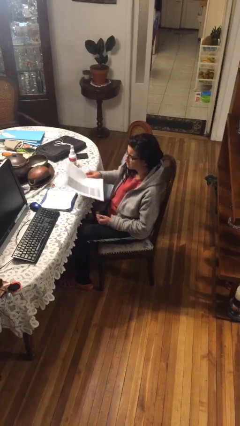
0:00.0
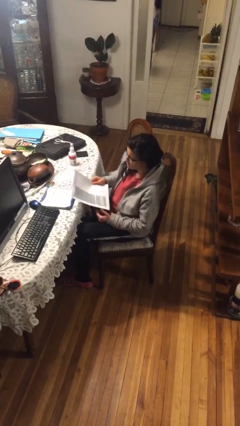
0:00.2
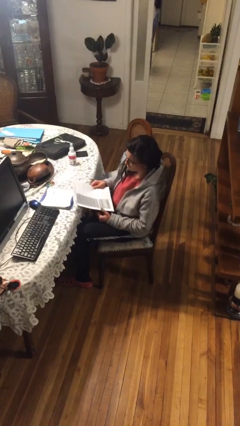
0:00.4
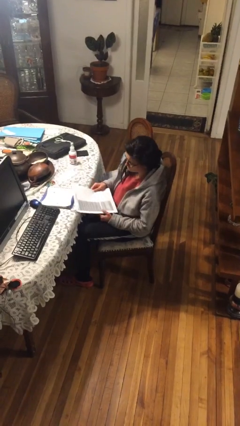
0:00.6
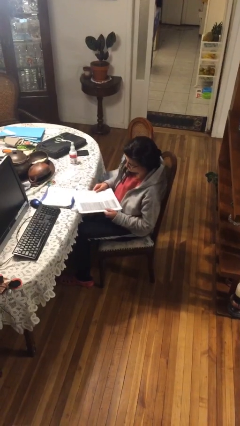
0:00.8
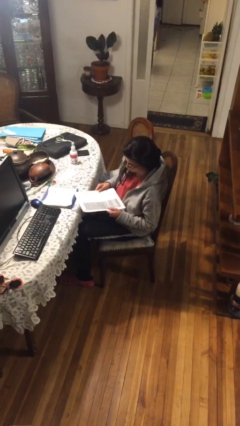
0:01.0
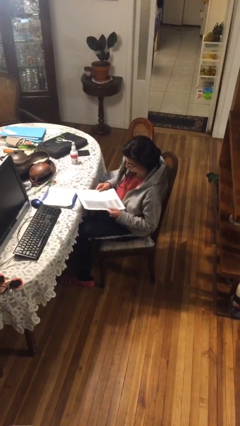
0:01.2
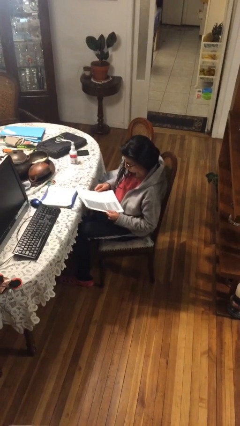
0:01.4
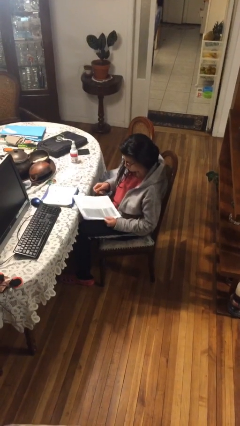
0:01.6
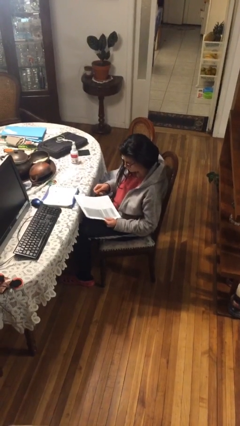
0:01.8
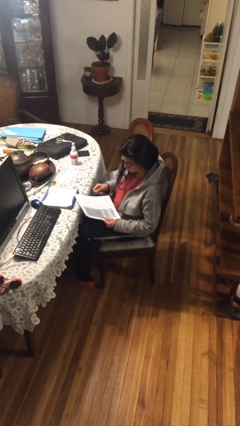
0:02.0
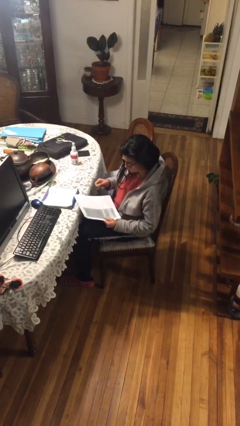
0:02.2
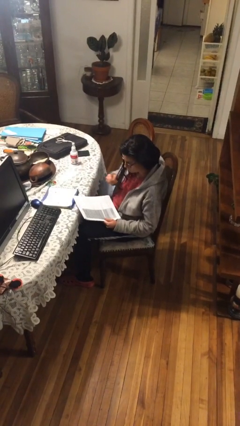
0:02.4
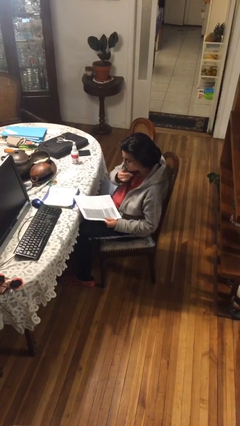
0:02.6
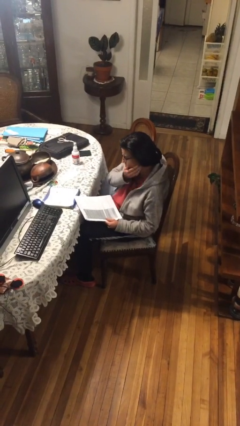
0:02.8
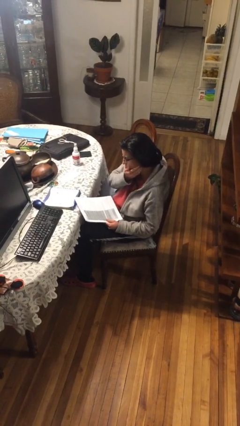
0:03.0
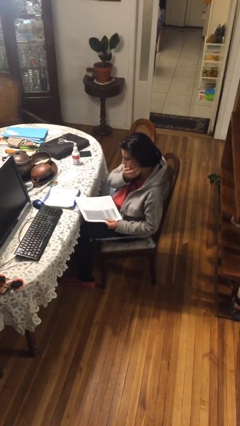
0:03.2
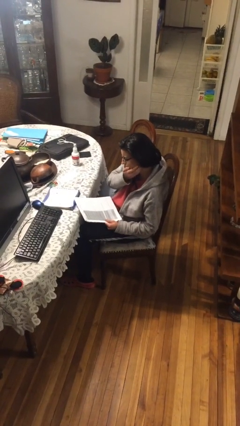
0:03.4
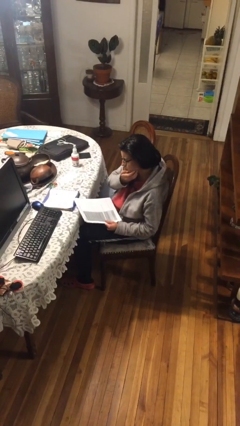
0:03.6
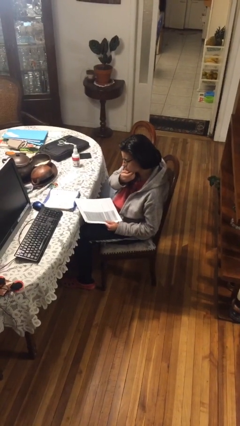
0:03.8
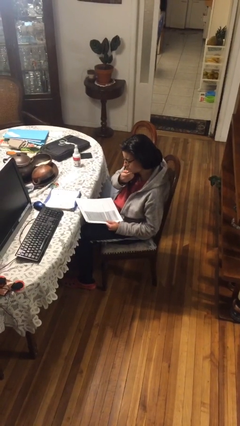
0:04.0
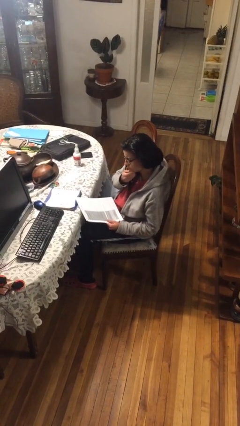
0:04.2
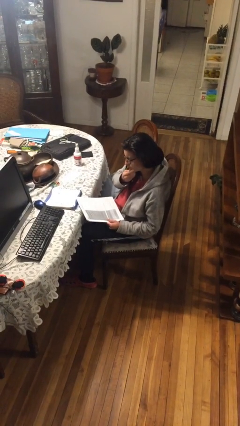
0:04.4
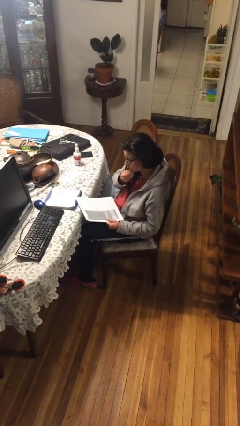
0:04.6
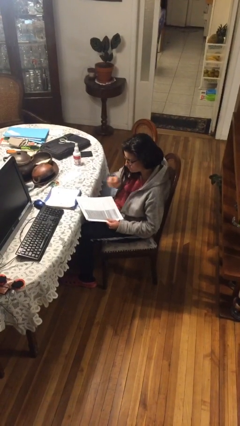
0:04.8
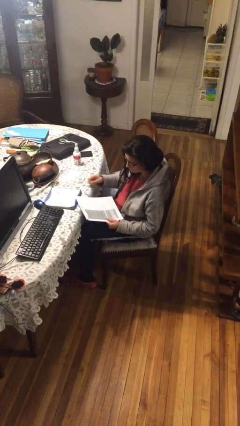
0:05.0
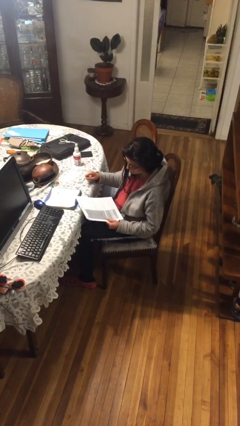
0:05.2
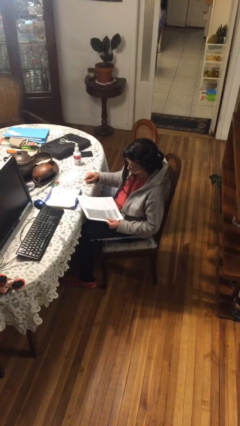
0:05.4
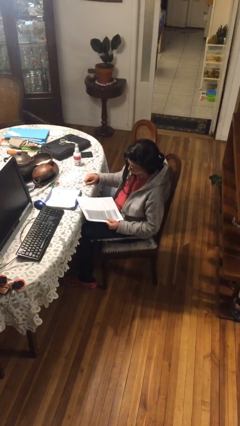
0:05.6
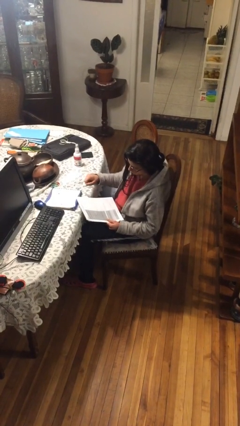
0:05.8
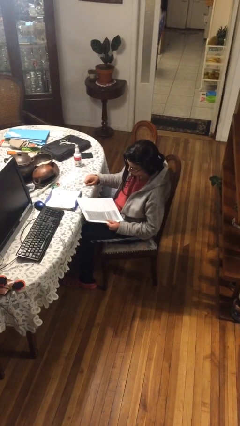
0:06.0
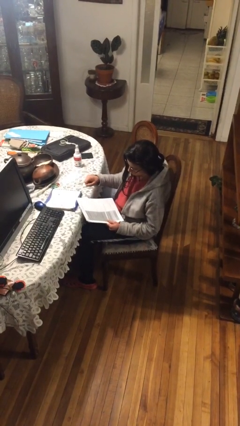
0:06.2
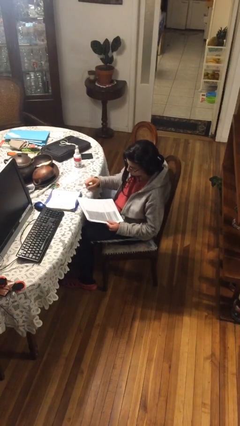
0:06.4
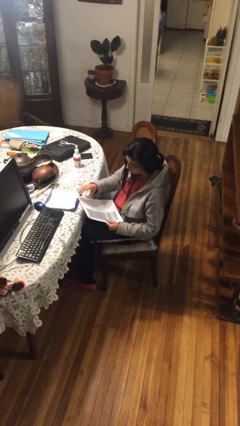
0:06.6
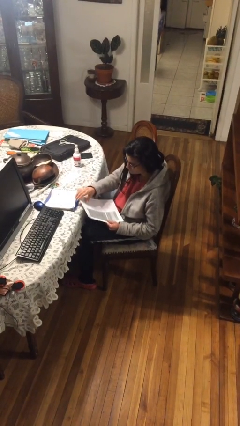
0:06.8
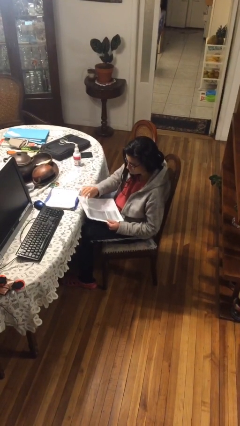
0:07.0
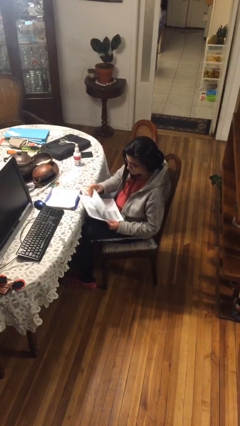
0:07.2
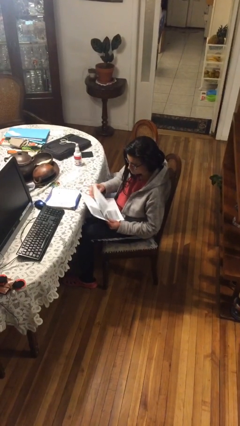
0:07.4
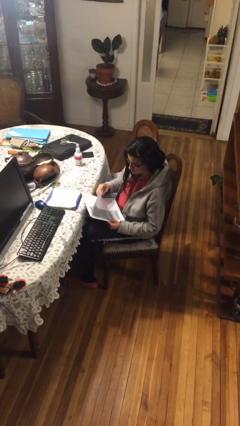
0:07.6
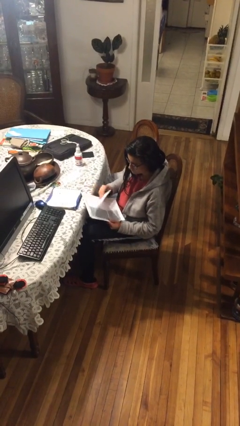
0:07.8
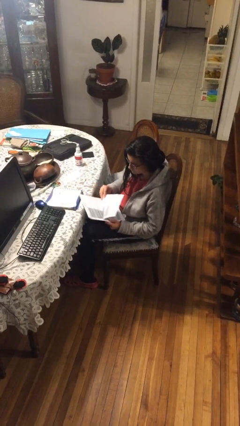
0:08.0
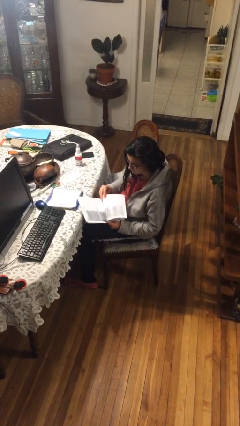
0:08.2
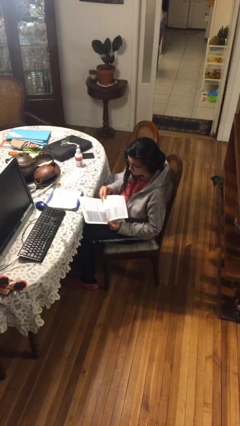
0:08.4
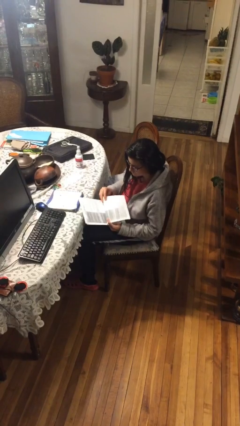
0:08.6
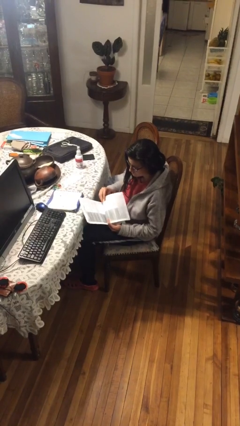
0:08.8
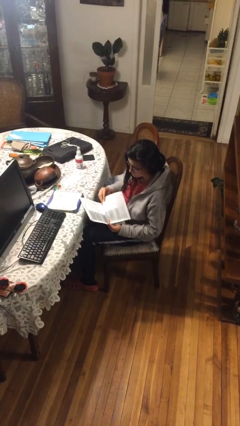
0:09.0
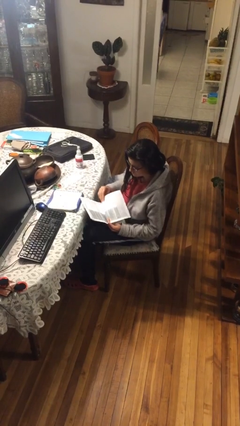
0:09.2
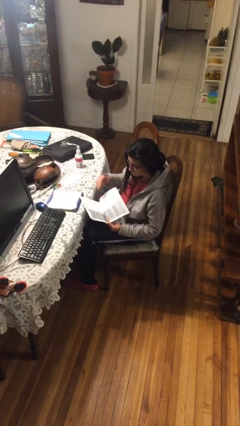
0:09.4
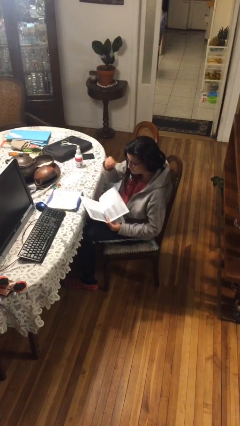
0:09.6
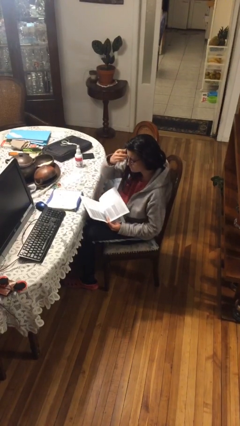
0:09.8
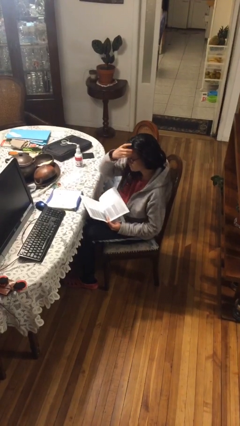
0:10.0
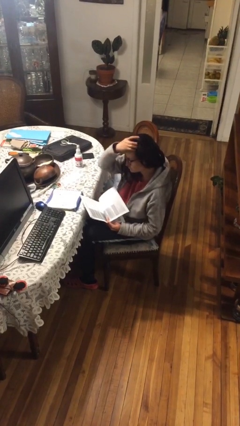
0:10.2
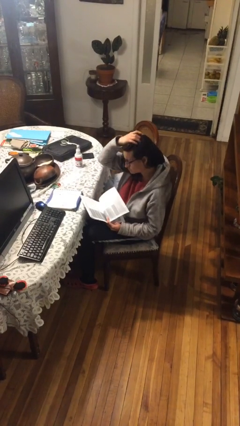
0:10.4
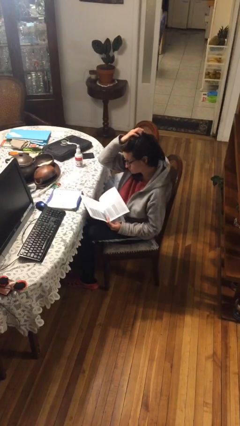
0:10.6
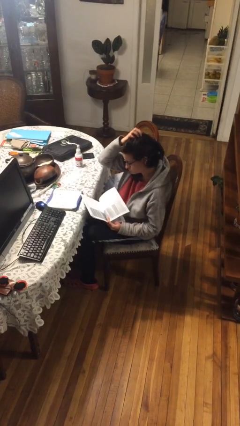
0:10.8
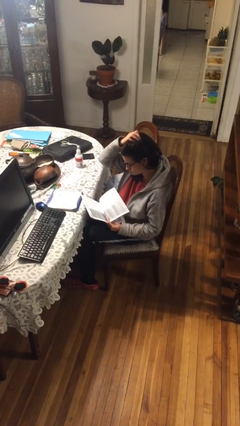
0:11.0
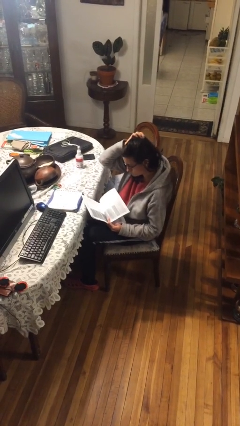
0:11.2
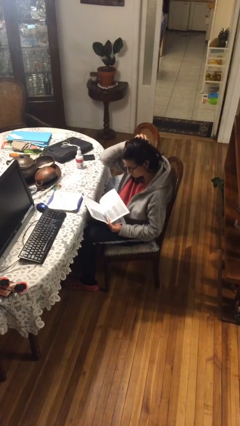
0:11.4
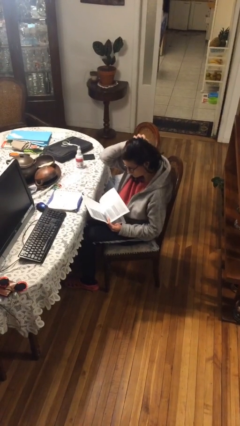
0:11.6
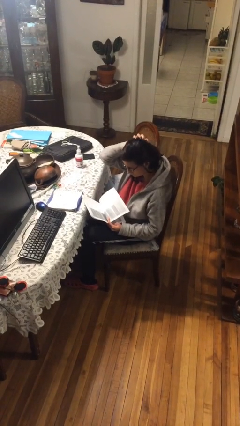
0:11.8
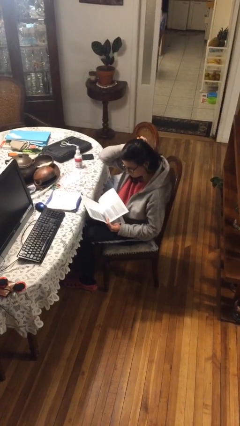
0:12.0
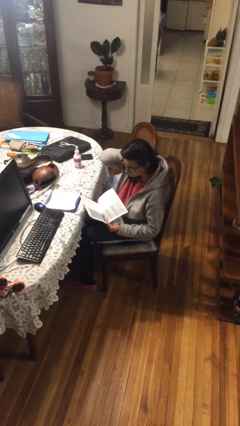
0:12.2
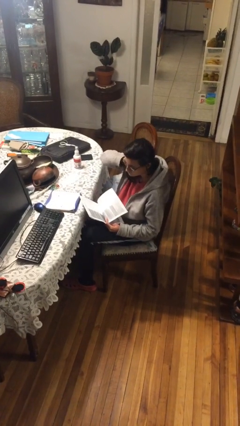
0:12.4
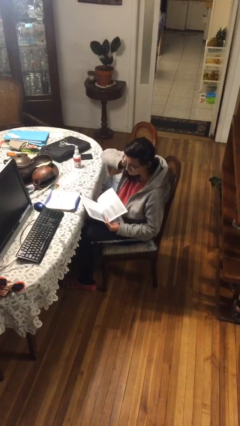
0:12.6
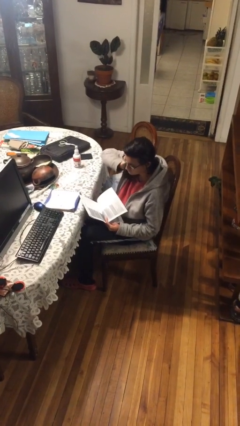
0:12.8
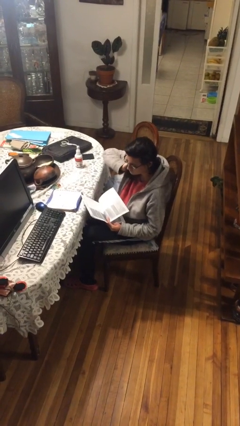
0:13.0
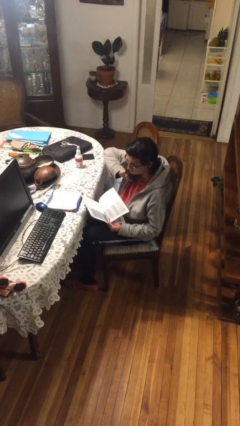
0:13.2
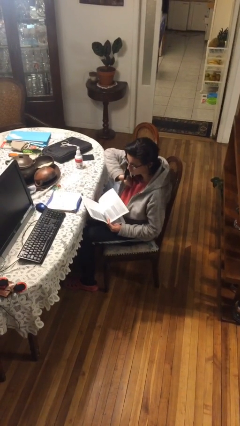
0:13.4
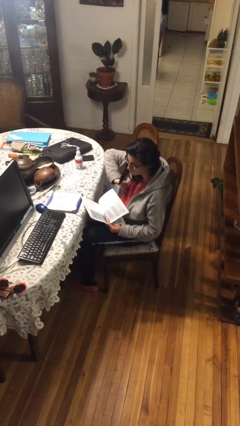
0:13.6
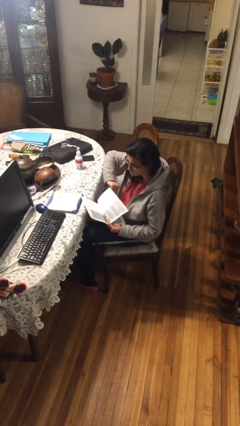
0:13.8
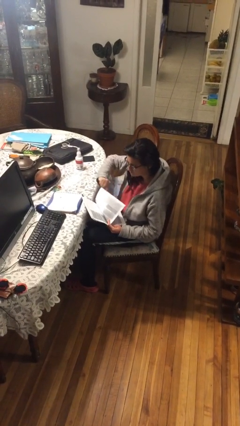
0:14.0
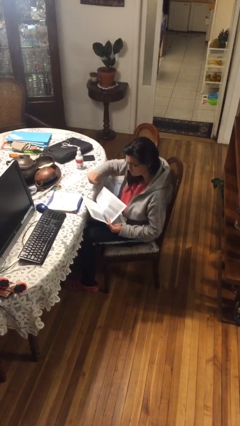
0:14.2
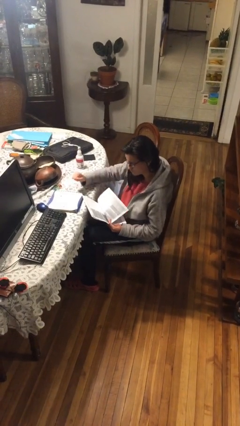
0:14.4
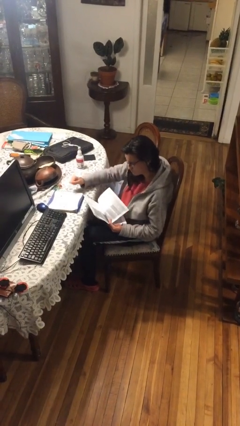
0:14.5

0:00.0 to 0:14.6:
person reads document

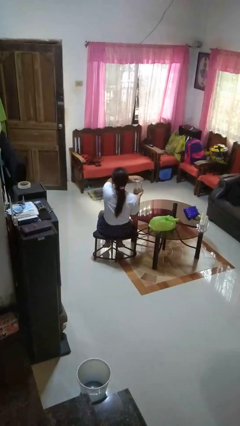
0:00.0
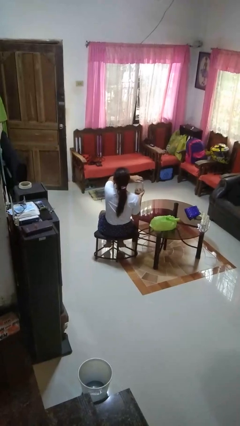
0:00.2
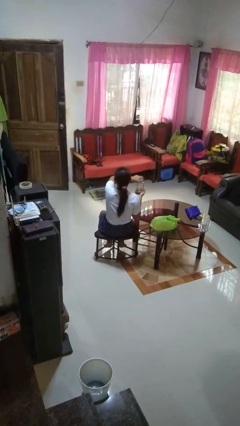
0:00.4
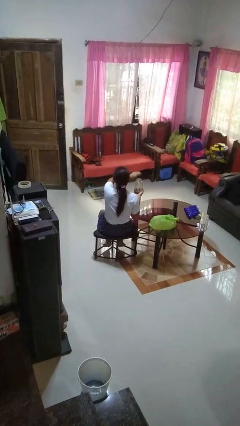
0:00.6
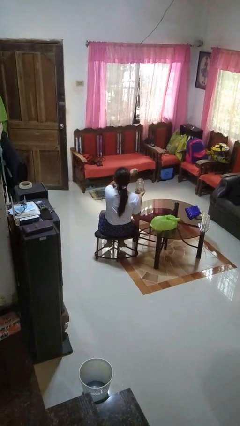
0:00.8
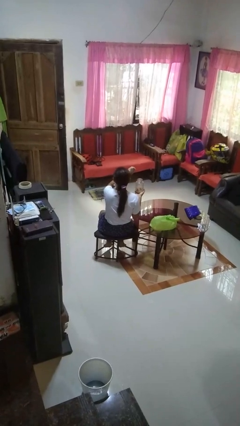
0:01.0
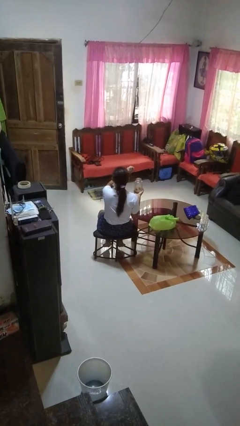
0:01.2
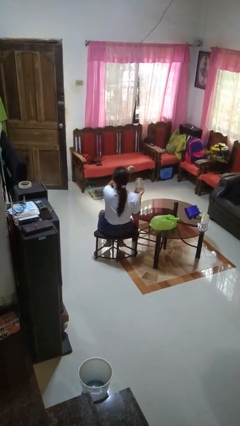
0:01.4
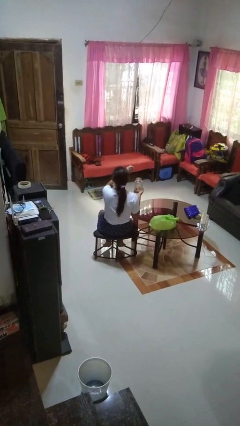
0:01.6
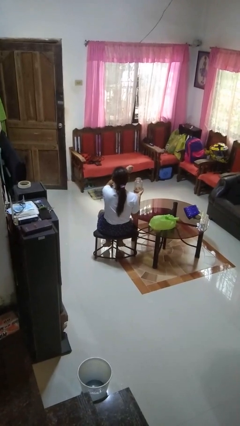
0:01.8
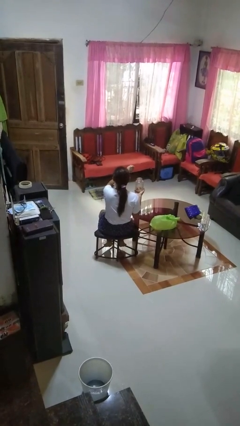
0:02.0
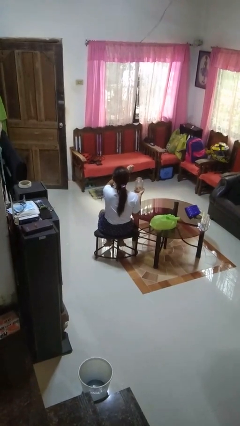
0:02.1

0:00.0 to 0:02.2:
person opens jar

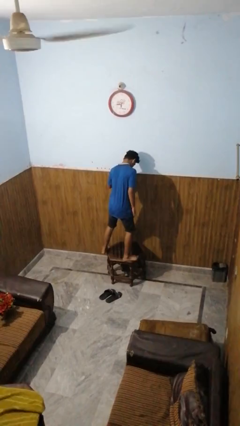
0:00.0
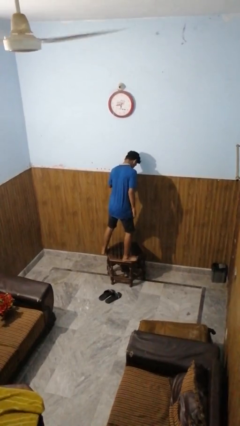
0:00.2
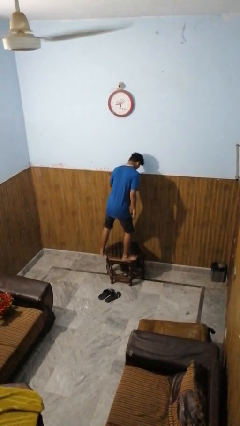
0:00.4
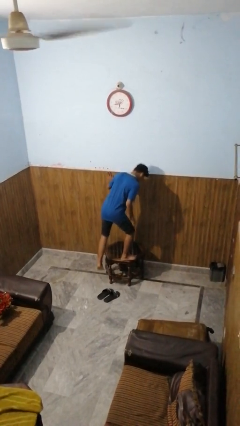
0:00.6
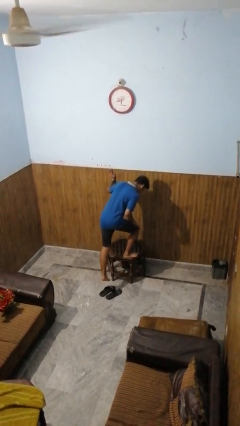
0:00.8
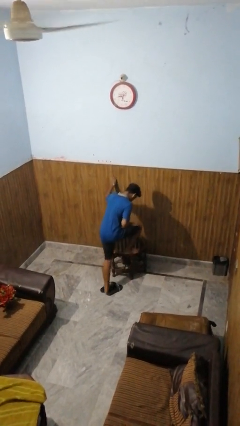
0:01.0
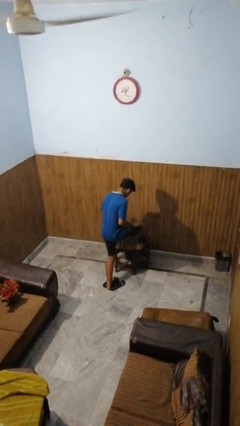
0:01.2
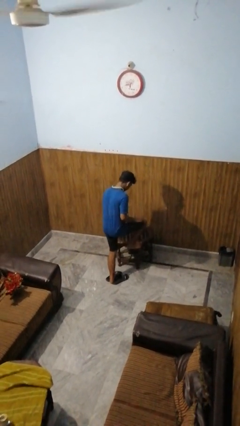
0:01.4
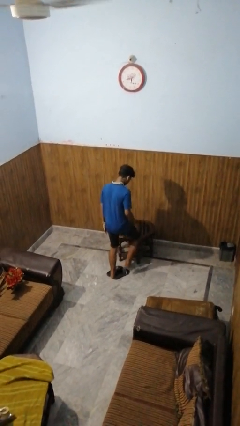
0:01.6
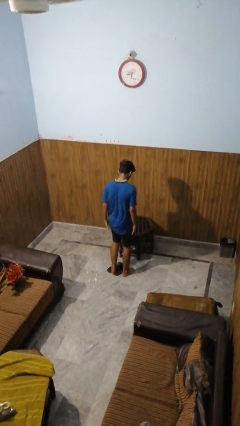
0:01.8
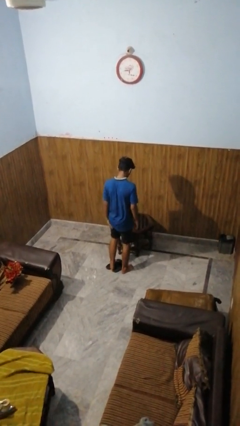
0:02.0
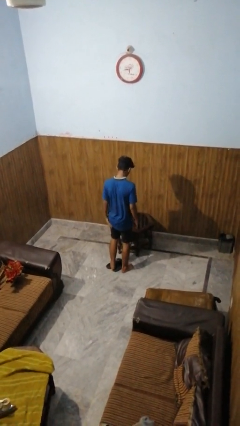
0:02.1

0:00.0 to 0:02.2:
person climbs off table
